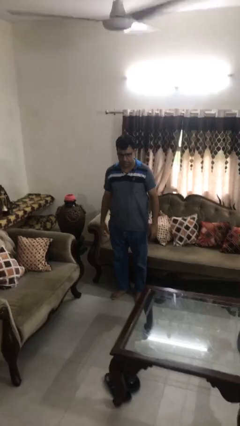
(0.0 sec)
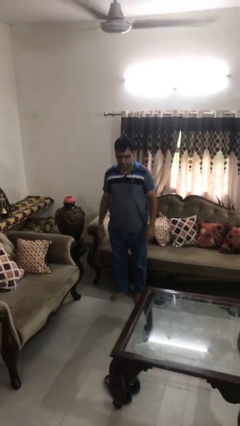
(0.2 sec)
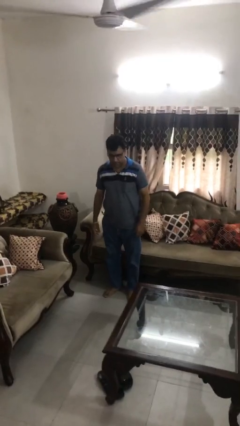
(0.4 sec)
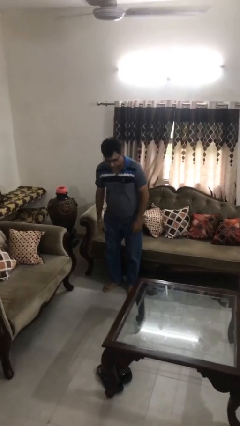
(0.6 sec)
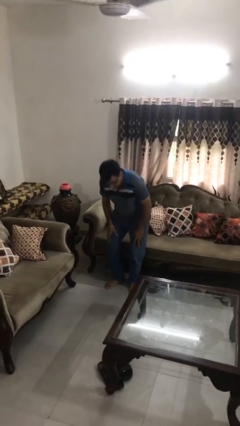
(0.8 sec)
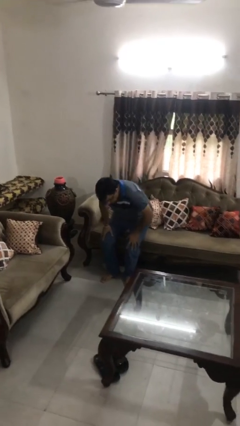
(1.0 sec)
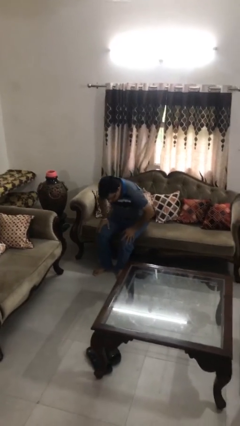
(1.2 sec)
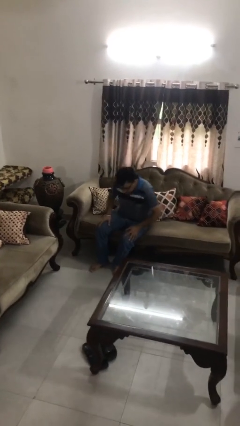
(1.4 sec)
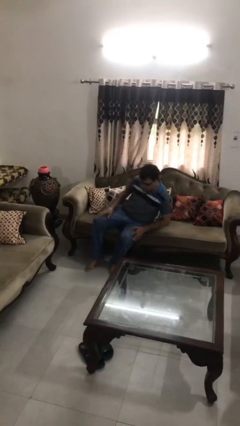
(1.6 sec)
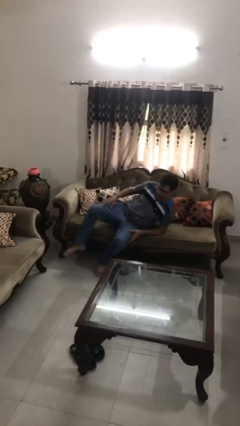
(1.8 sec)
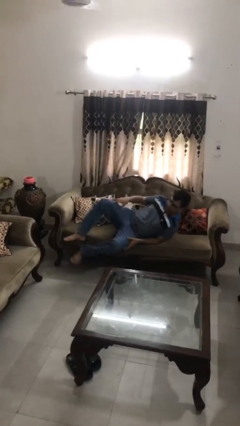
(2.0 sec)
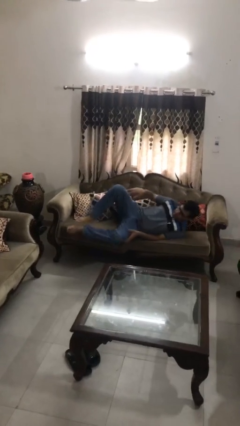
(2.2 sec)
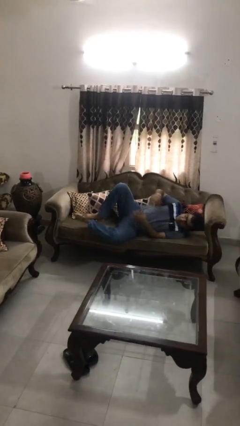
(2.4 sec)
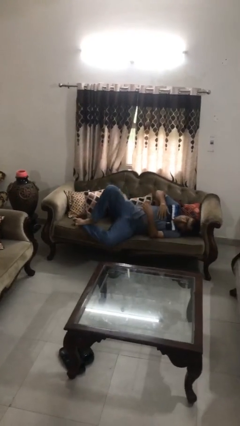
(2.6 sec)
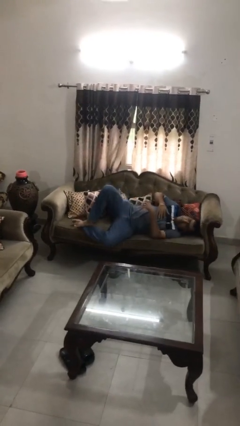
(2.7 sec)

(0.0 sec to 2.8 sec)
person lies down on couch

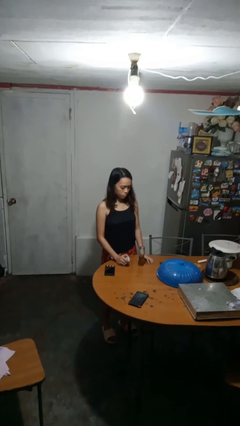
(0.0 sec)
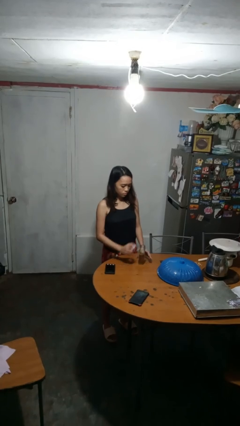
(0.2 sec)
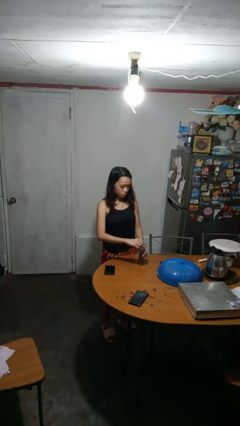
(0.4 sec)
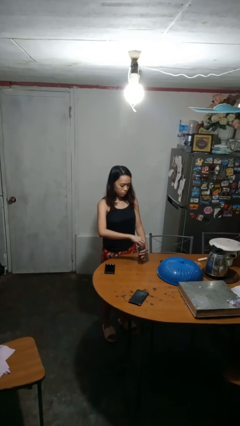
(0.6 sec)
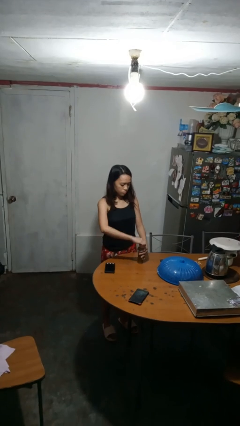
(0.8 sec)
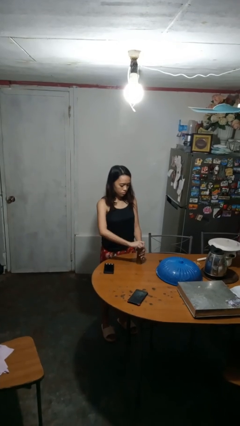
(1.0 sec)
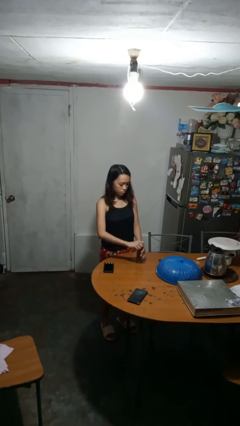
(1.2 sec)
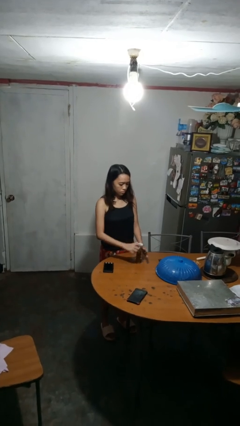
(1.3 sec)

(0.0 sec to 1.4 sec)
person closes jar

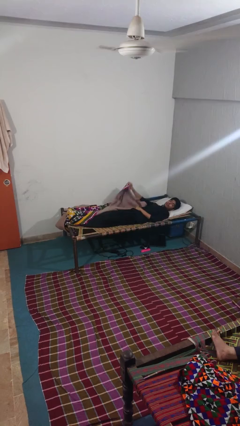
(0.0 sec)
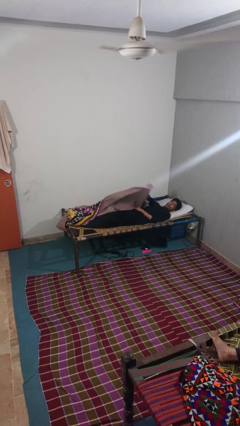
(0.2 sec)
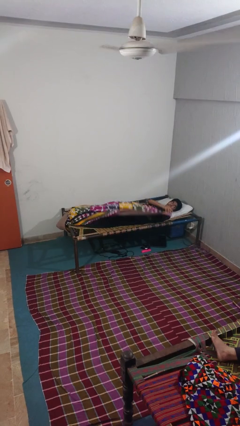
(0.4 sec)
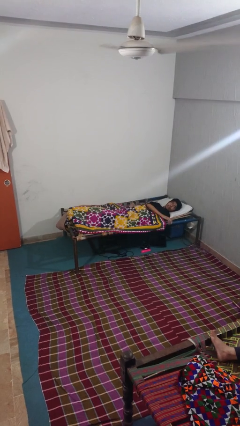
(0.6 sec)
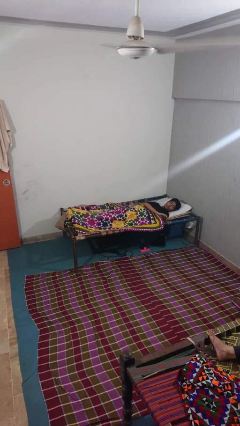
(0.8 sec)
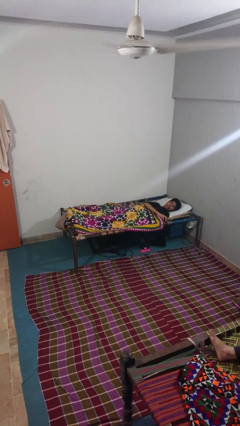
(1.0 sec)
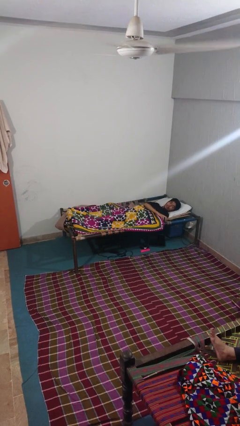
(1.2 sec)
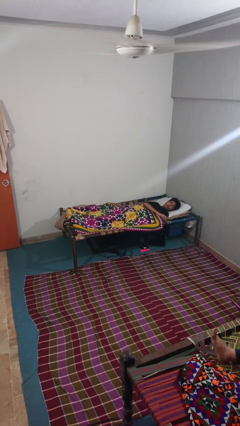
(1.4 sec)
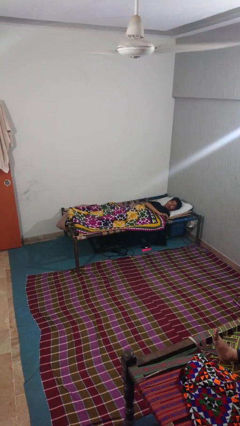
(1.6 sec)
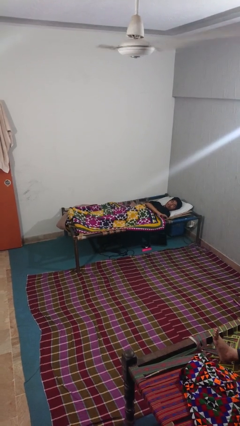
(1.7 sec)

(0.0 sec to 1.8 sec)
person covers with bedsheets

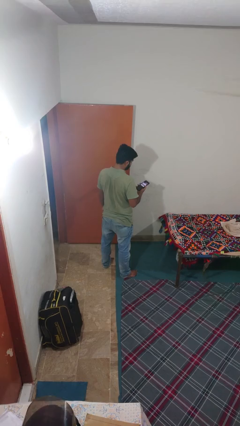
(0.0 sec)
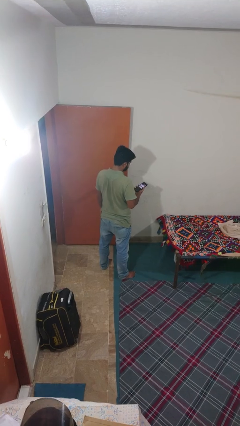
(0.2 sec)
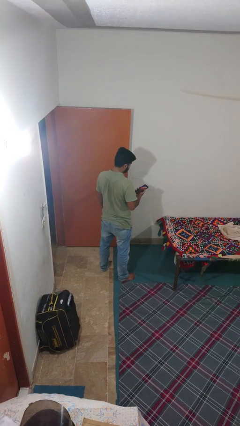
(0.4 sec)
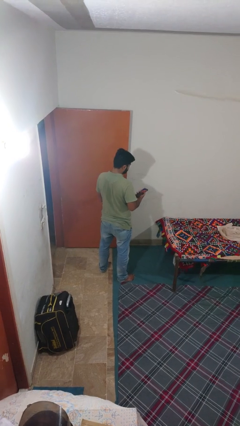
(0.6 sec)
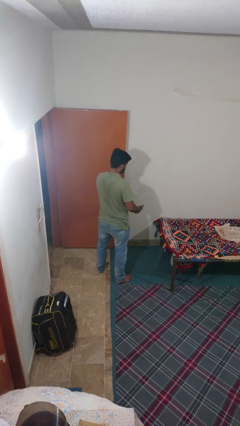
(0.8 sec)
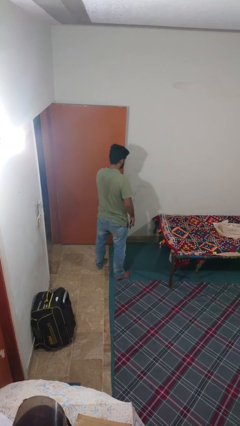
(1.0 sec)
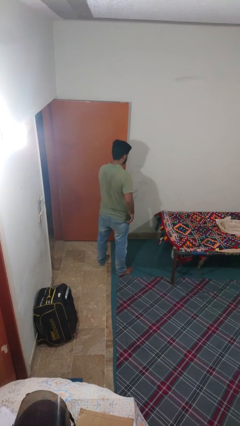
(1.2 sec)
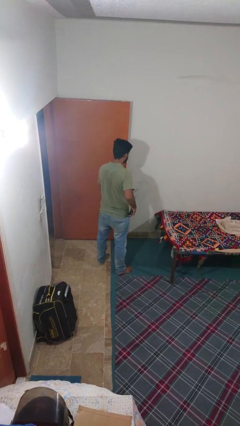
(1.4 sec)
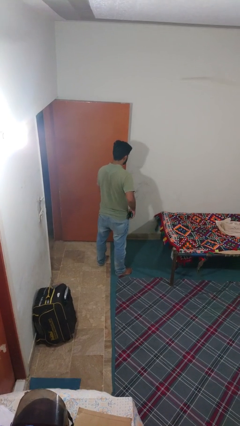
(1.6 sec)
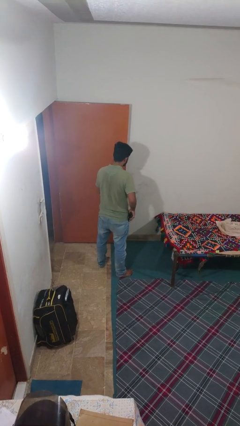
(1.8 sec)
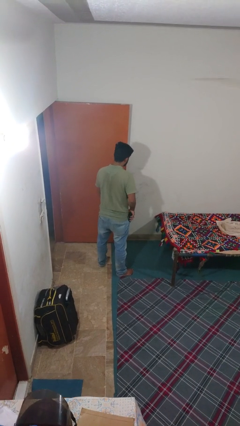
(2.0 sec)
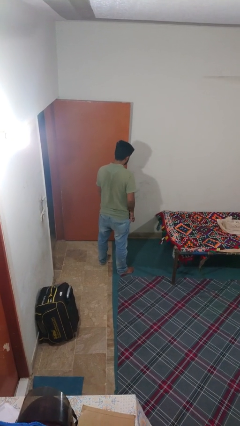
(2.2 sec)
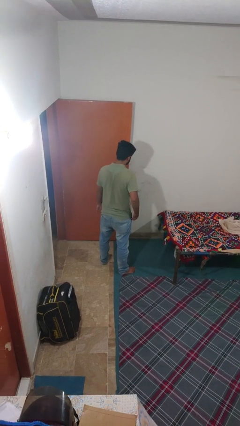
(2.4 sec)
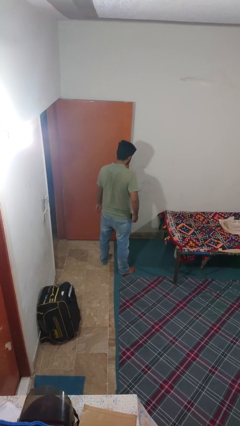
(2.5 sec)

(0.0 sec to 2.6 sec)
person puts phone into pocket

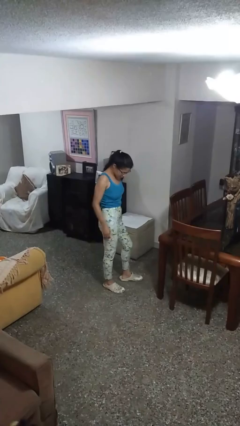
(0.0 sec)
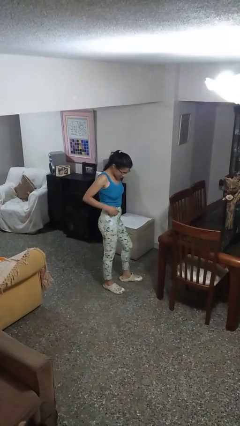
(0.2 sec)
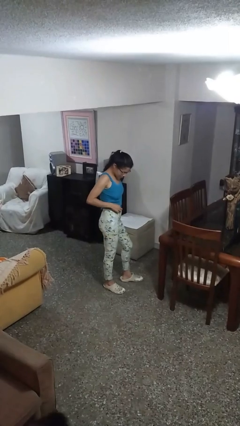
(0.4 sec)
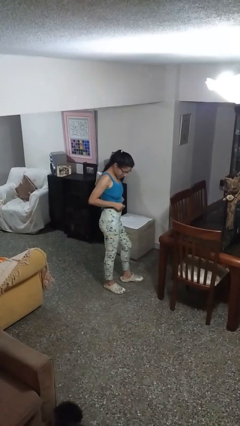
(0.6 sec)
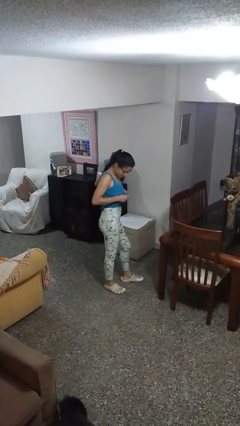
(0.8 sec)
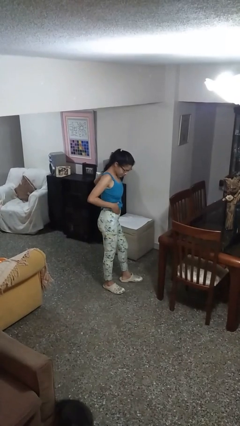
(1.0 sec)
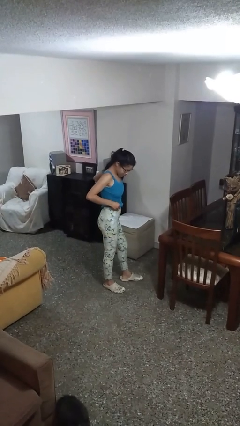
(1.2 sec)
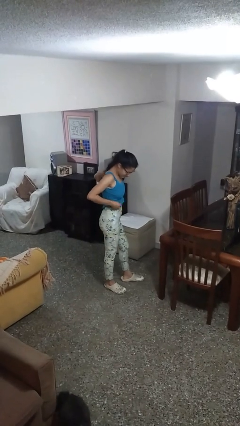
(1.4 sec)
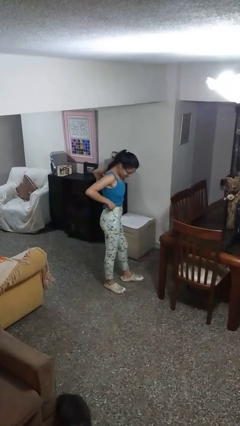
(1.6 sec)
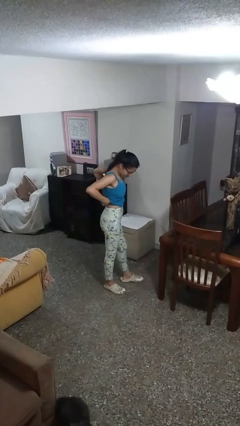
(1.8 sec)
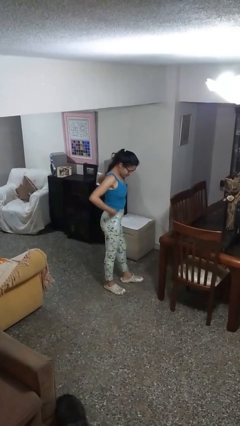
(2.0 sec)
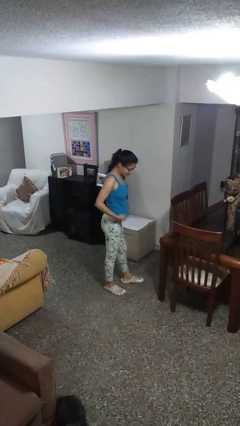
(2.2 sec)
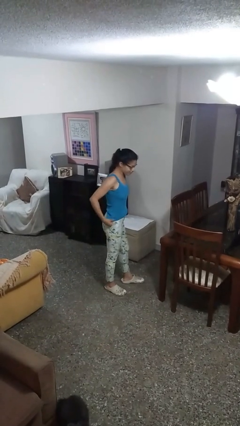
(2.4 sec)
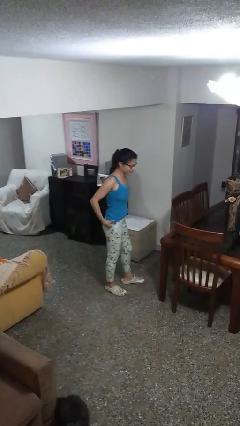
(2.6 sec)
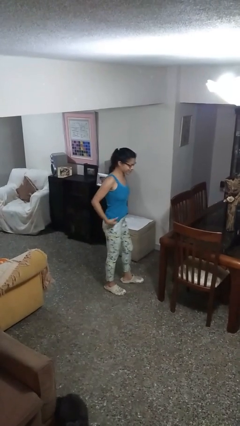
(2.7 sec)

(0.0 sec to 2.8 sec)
person untucks shirt

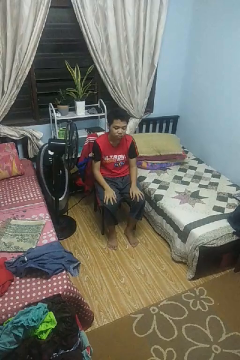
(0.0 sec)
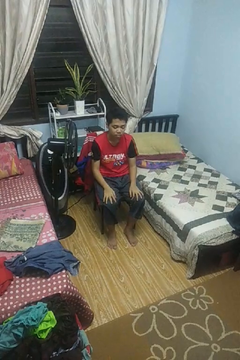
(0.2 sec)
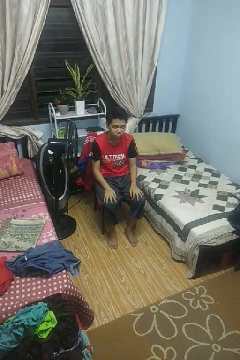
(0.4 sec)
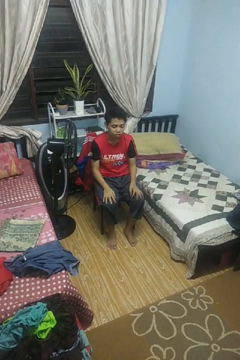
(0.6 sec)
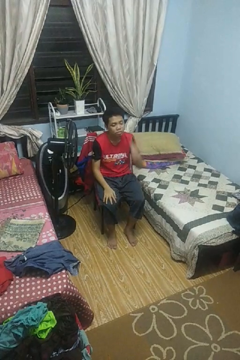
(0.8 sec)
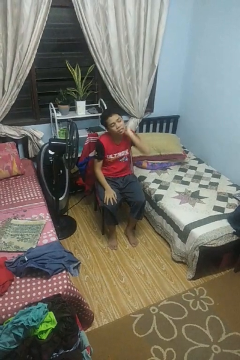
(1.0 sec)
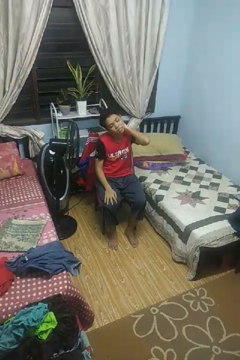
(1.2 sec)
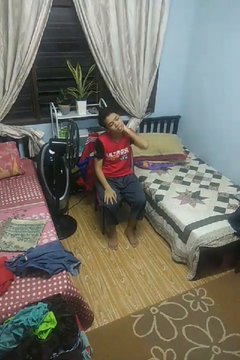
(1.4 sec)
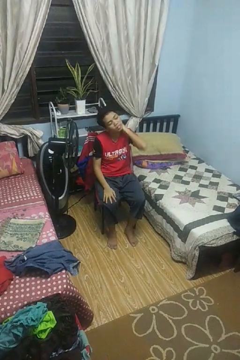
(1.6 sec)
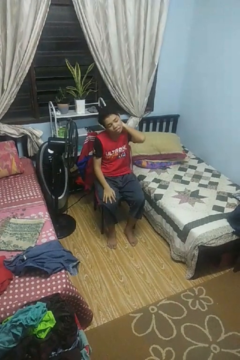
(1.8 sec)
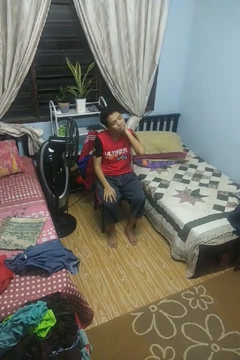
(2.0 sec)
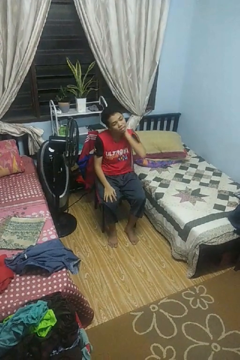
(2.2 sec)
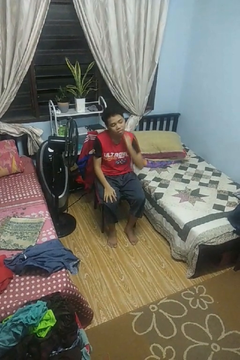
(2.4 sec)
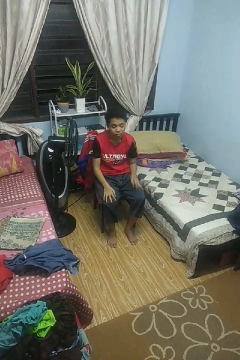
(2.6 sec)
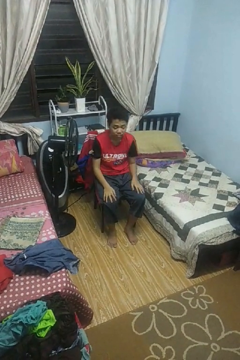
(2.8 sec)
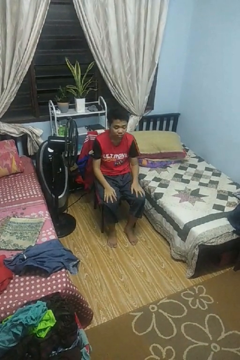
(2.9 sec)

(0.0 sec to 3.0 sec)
person rubs neck

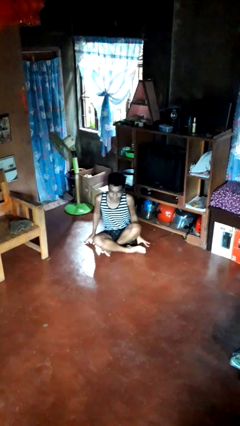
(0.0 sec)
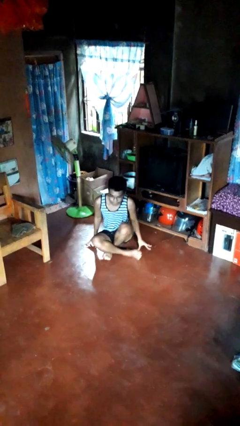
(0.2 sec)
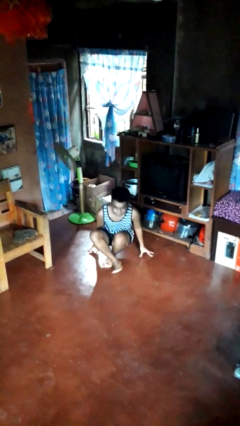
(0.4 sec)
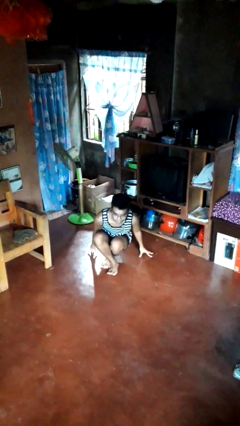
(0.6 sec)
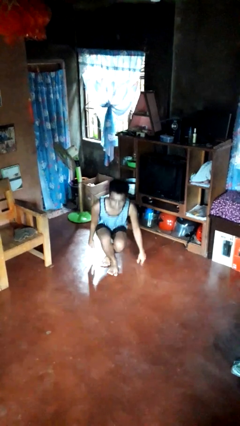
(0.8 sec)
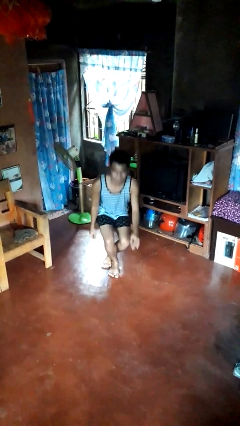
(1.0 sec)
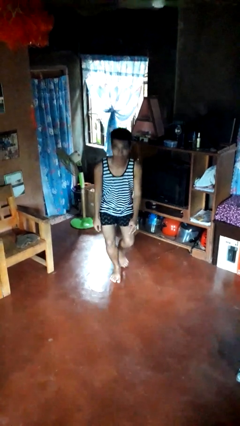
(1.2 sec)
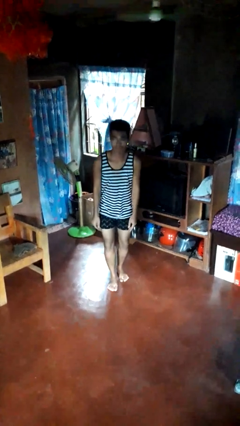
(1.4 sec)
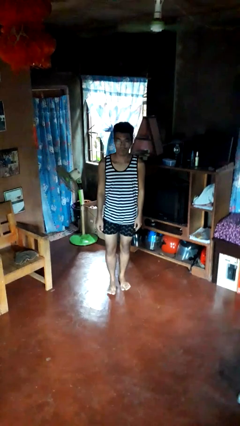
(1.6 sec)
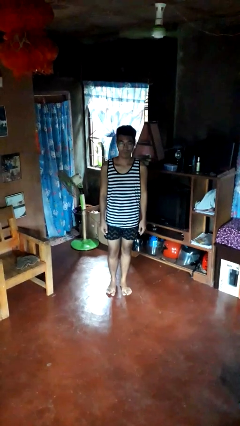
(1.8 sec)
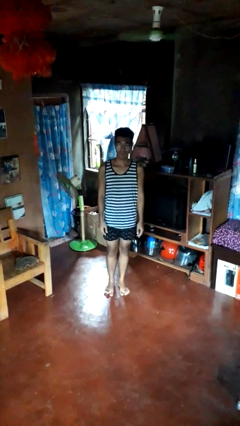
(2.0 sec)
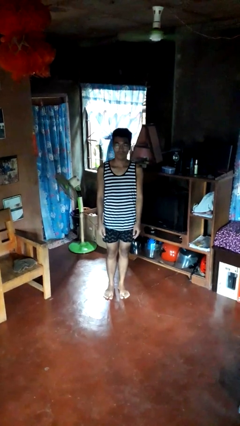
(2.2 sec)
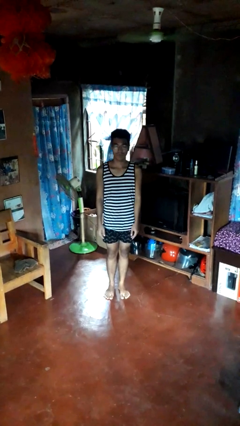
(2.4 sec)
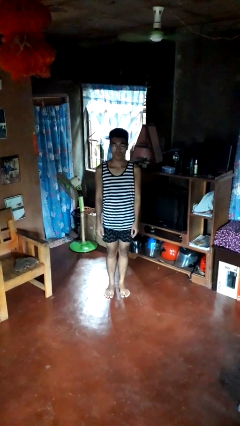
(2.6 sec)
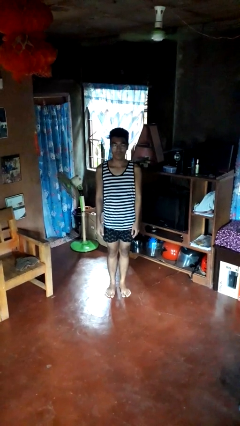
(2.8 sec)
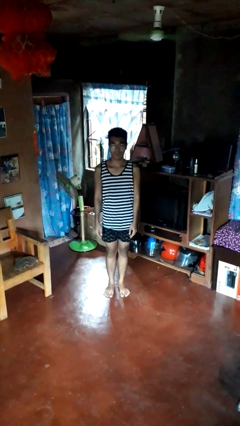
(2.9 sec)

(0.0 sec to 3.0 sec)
person stands up from floor

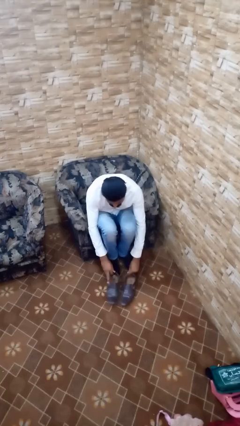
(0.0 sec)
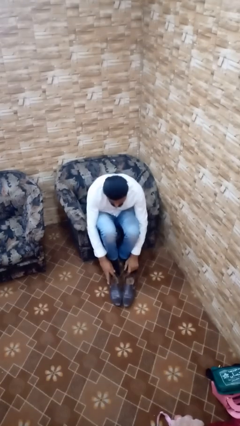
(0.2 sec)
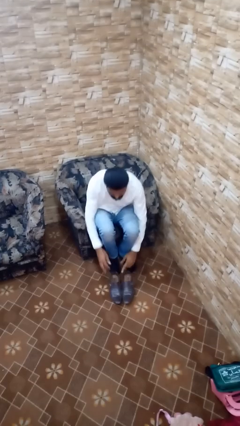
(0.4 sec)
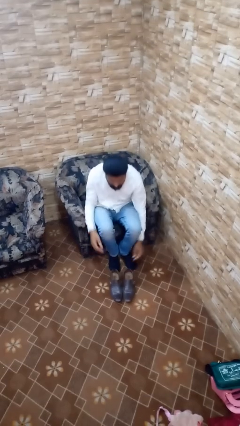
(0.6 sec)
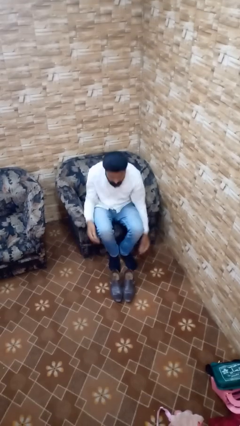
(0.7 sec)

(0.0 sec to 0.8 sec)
person takes off shoes
